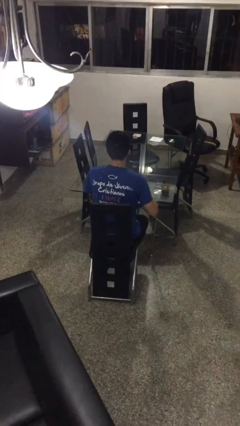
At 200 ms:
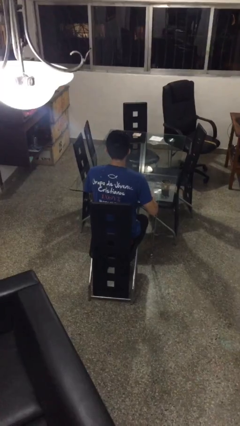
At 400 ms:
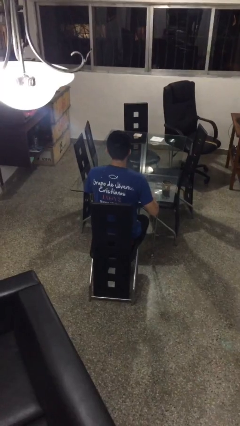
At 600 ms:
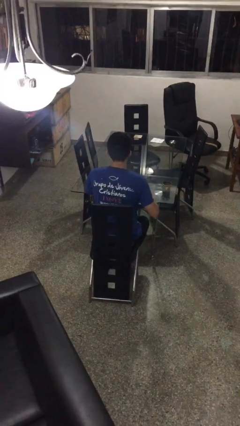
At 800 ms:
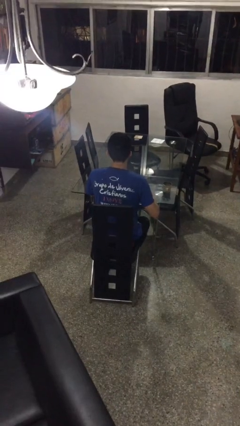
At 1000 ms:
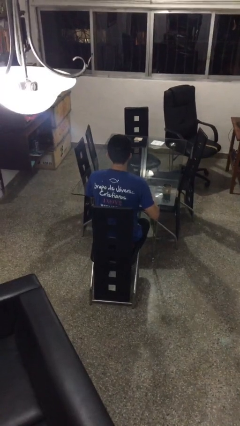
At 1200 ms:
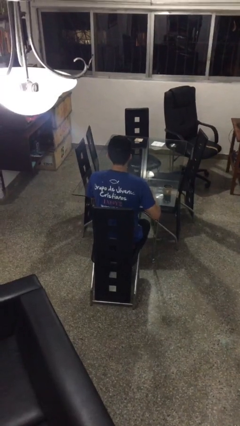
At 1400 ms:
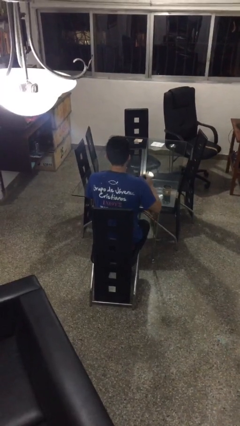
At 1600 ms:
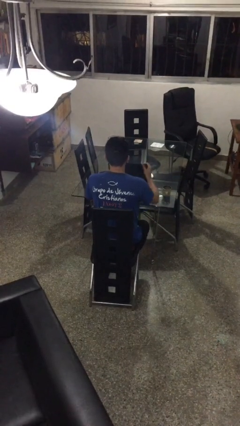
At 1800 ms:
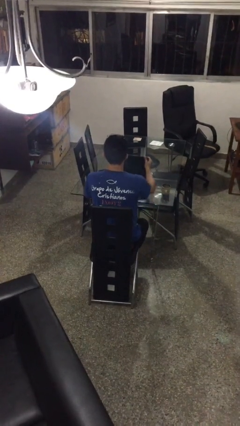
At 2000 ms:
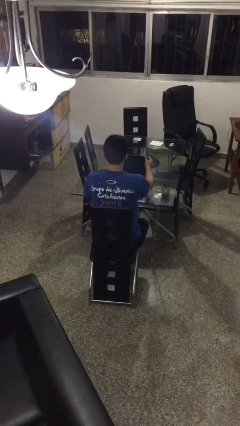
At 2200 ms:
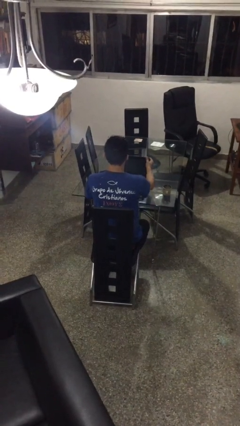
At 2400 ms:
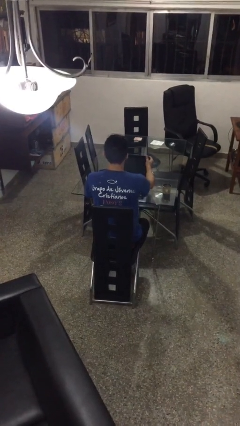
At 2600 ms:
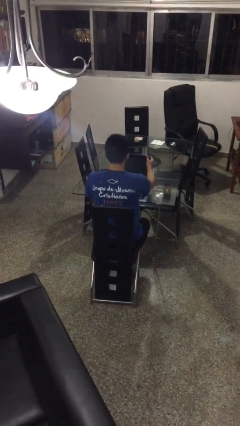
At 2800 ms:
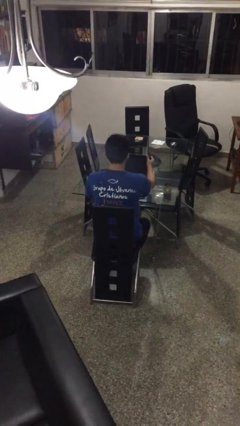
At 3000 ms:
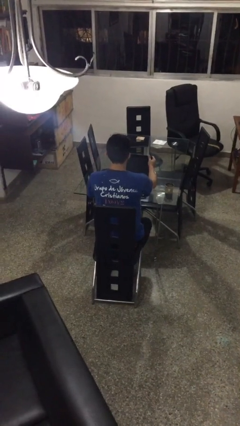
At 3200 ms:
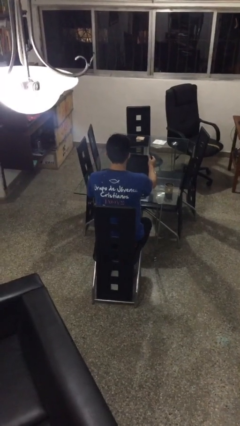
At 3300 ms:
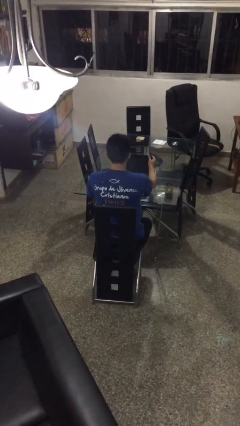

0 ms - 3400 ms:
person opens laptop

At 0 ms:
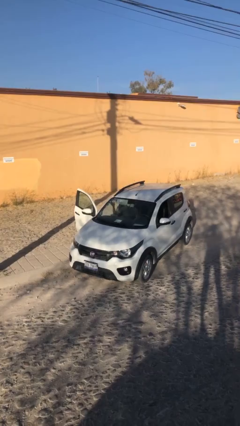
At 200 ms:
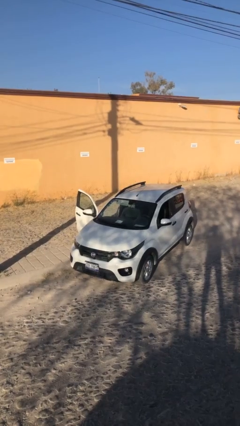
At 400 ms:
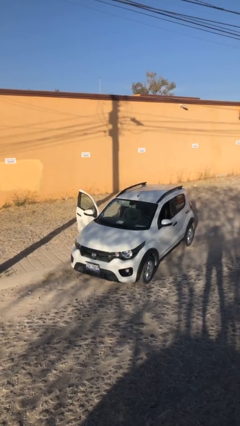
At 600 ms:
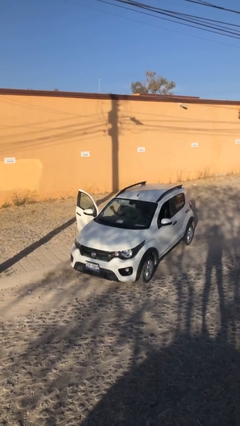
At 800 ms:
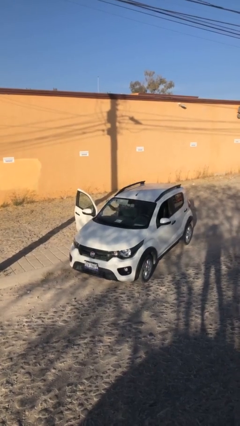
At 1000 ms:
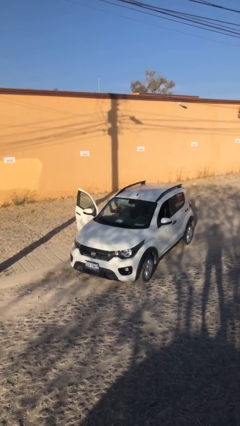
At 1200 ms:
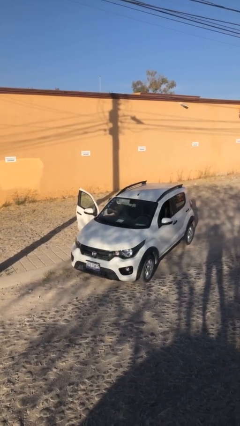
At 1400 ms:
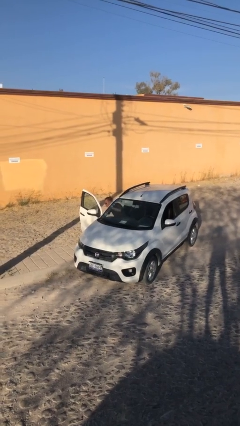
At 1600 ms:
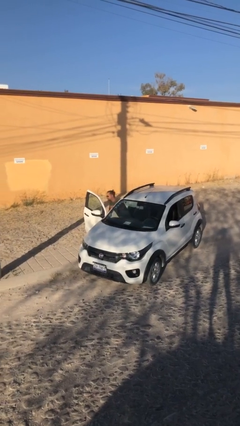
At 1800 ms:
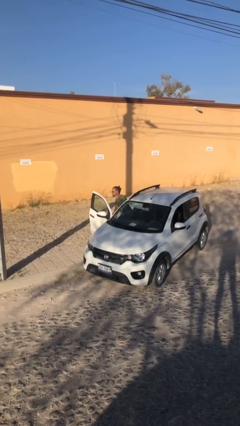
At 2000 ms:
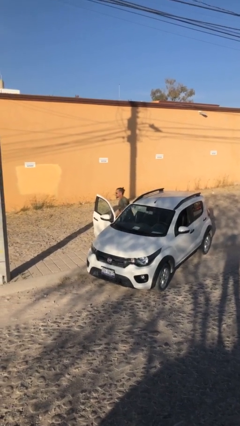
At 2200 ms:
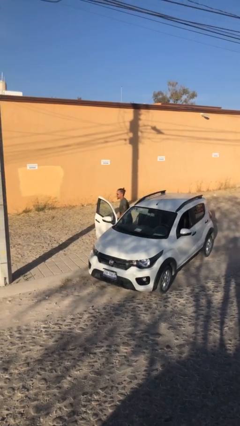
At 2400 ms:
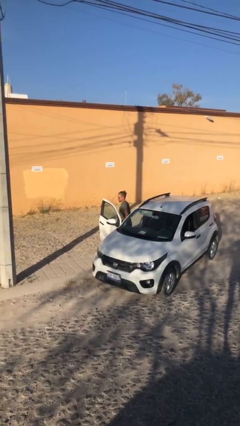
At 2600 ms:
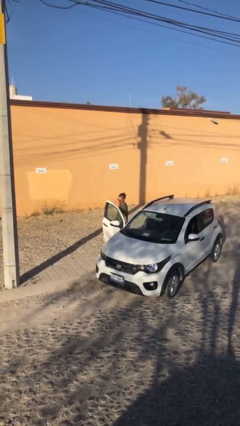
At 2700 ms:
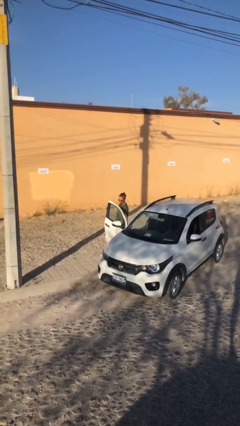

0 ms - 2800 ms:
person exits car

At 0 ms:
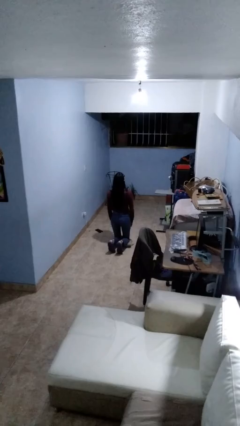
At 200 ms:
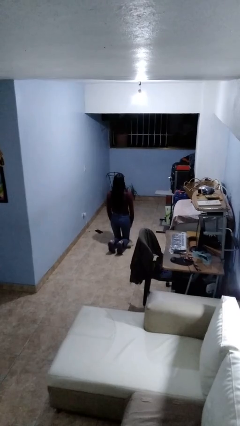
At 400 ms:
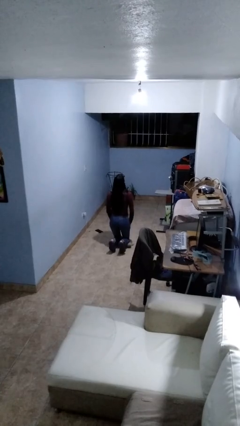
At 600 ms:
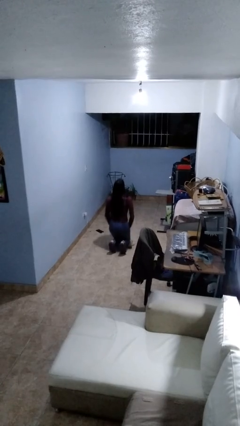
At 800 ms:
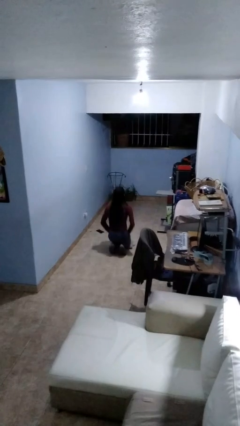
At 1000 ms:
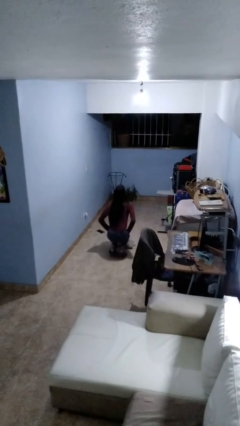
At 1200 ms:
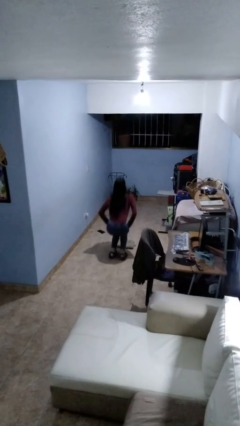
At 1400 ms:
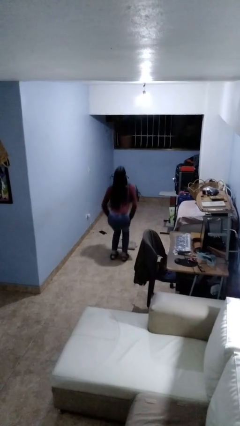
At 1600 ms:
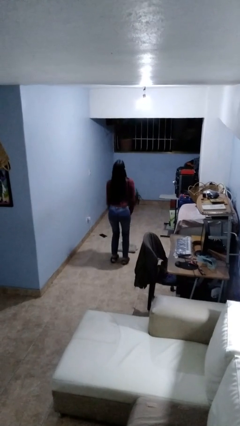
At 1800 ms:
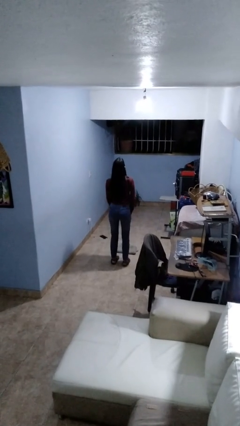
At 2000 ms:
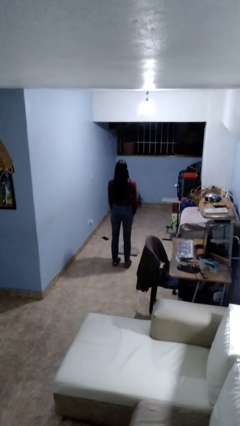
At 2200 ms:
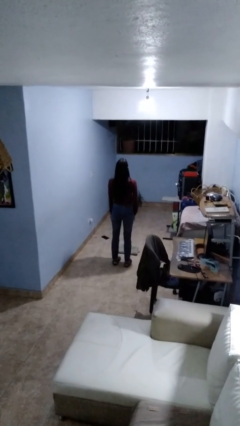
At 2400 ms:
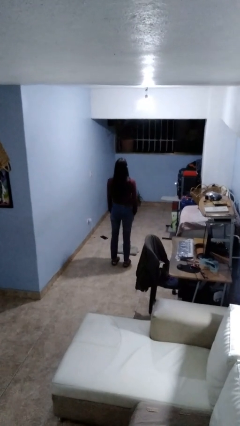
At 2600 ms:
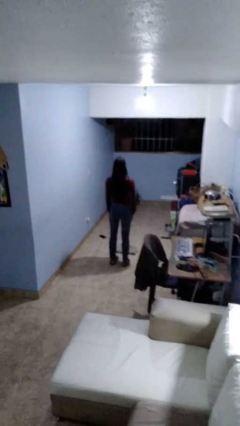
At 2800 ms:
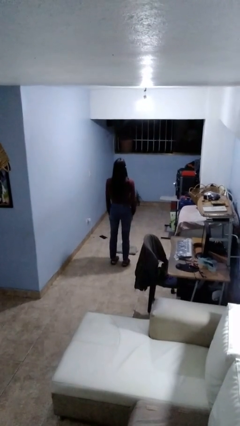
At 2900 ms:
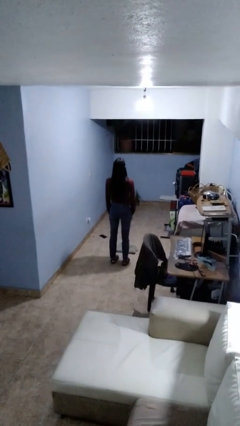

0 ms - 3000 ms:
person stands up from floor

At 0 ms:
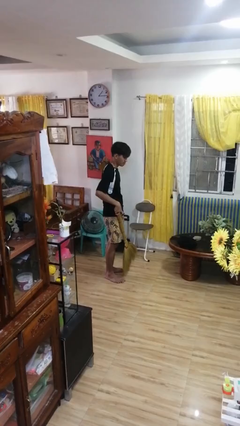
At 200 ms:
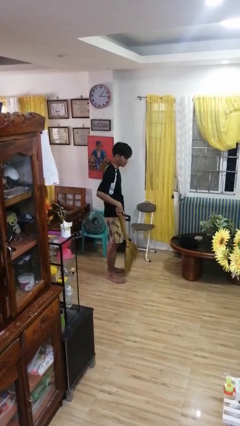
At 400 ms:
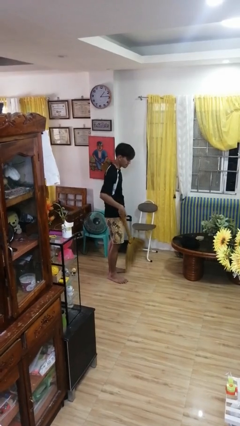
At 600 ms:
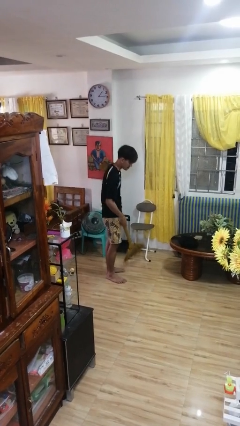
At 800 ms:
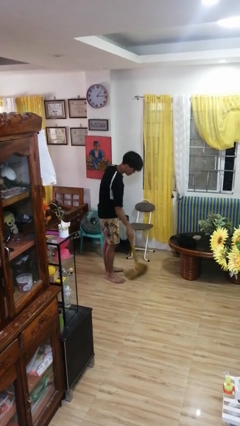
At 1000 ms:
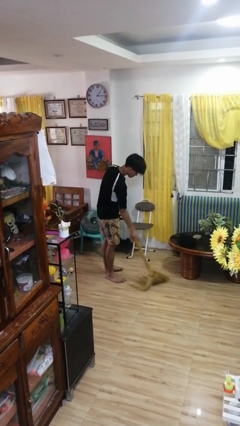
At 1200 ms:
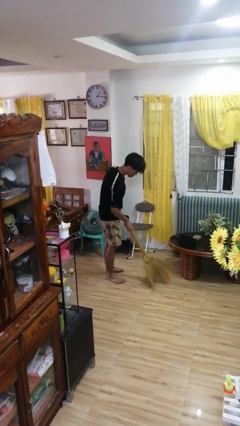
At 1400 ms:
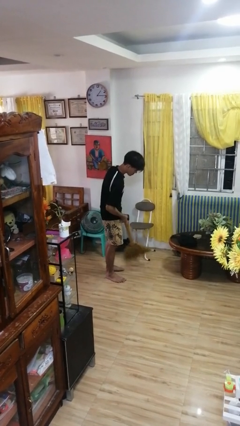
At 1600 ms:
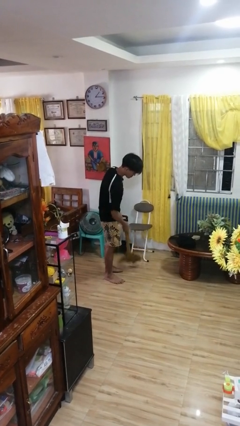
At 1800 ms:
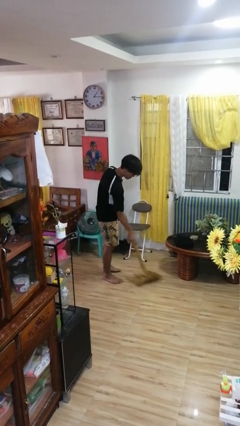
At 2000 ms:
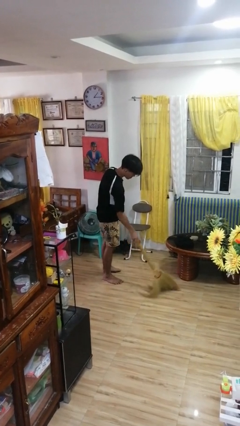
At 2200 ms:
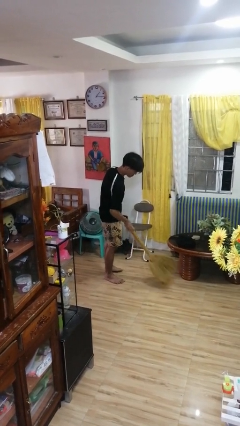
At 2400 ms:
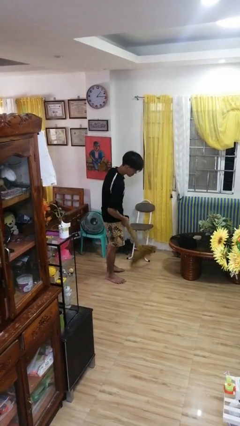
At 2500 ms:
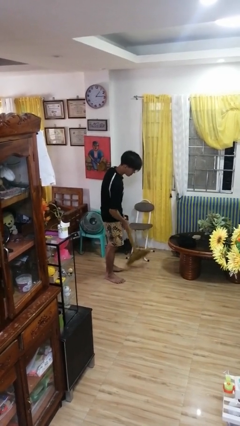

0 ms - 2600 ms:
person sweeps floor

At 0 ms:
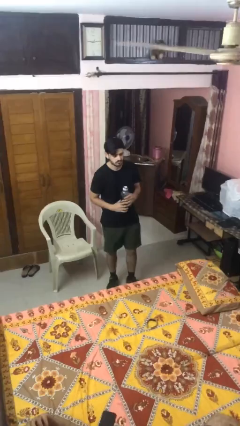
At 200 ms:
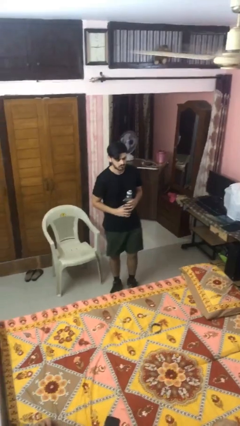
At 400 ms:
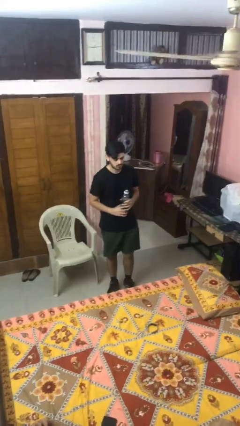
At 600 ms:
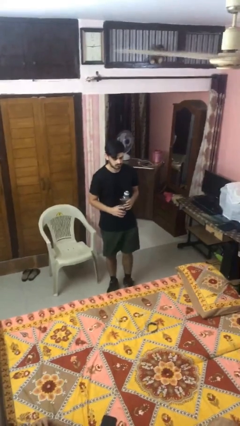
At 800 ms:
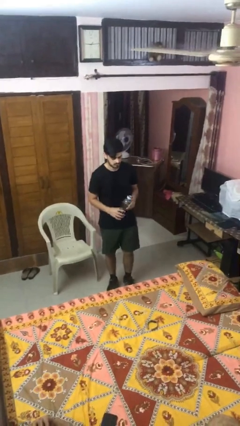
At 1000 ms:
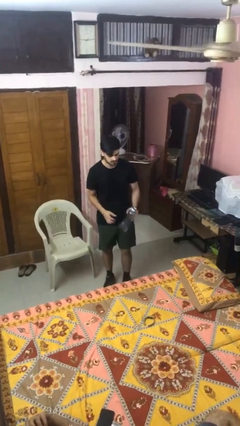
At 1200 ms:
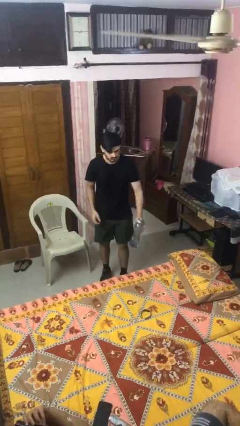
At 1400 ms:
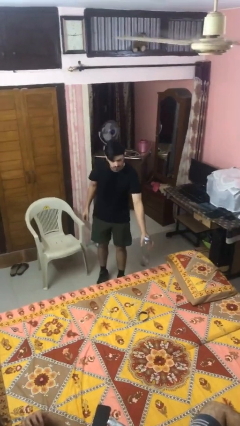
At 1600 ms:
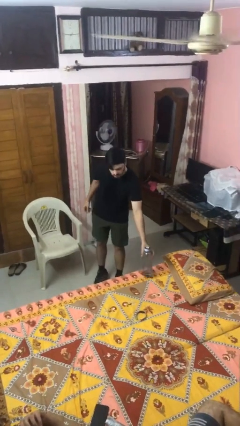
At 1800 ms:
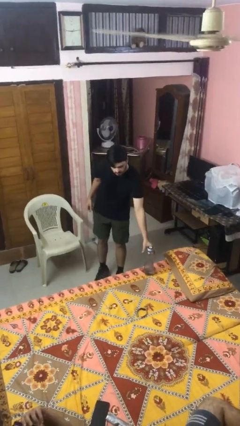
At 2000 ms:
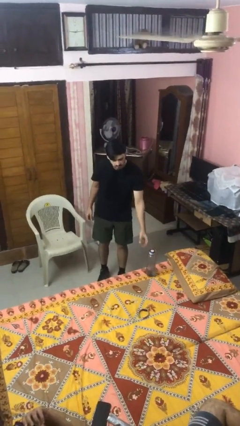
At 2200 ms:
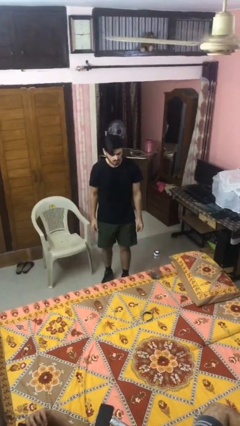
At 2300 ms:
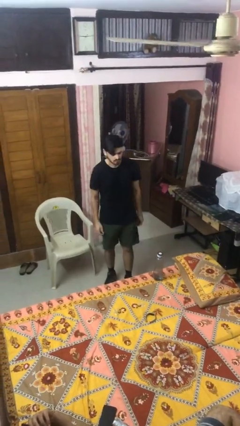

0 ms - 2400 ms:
person puts down object on bed

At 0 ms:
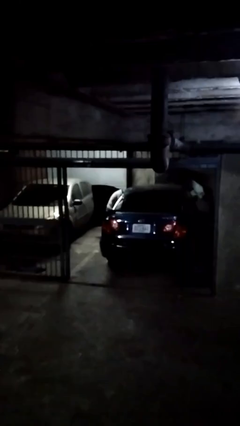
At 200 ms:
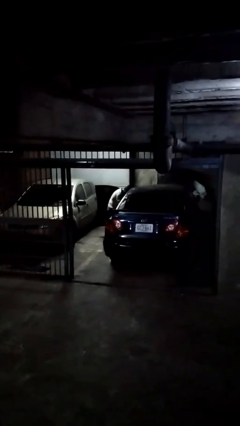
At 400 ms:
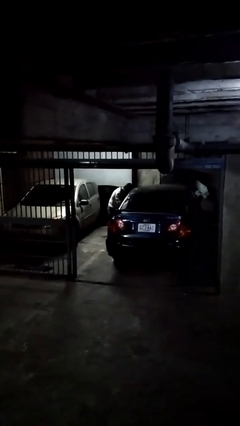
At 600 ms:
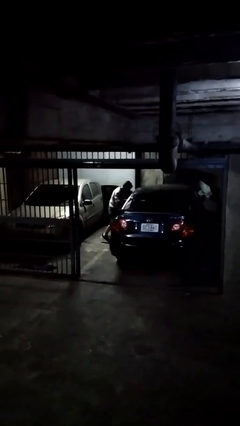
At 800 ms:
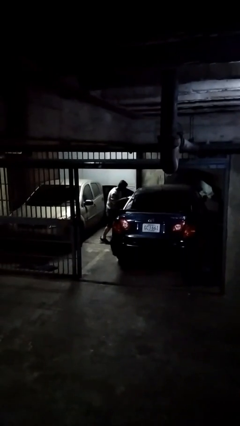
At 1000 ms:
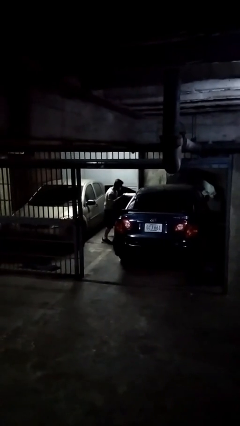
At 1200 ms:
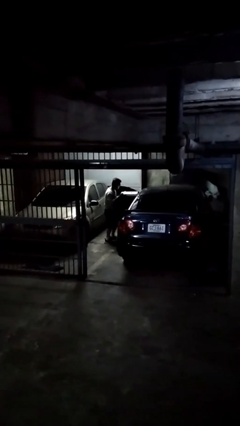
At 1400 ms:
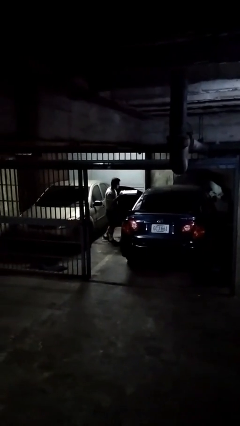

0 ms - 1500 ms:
person unloads car

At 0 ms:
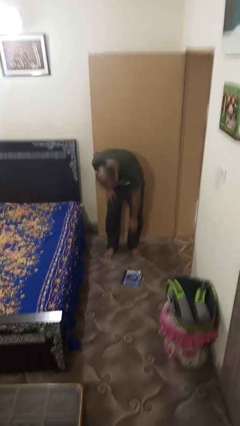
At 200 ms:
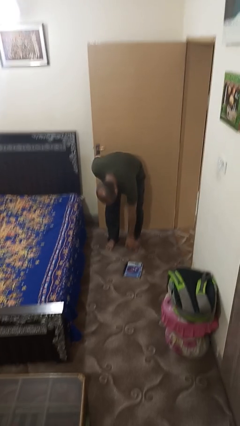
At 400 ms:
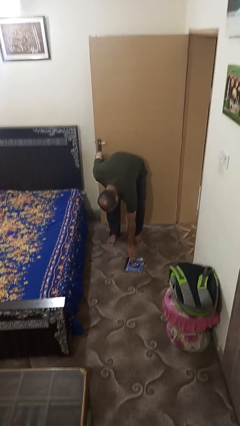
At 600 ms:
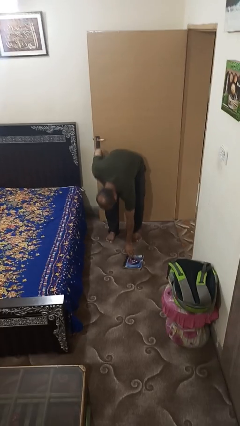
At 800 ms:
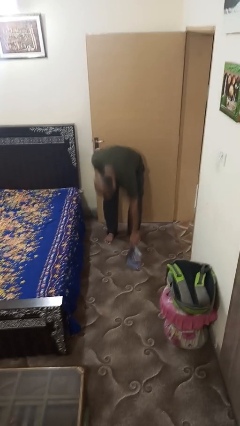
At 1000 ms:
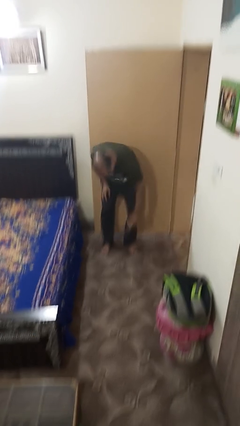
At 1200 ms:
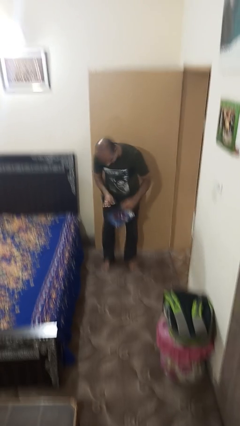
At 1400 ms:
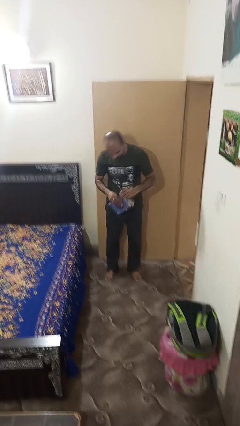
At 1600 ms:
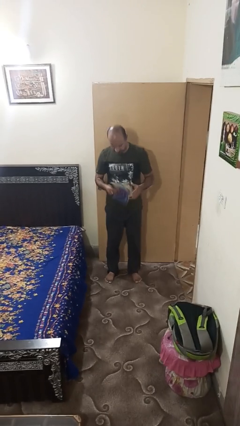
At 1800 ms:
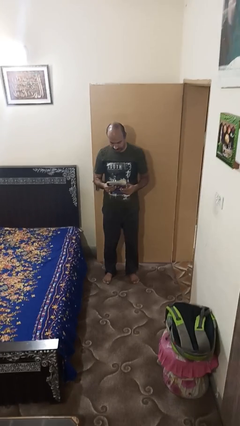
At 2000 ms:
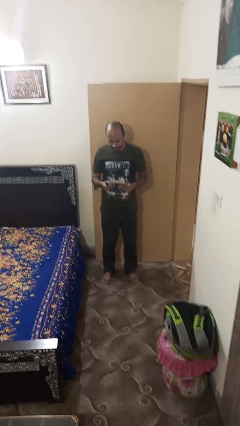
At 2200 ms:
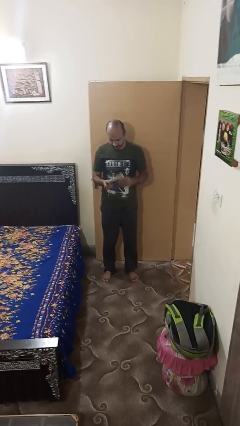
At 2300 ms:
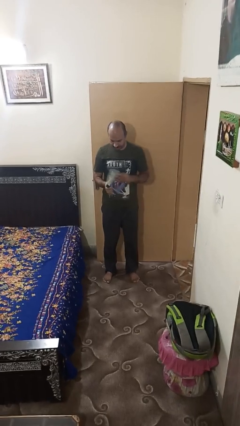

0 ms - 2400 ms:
person picks up object from floor
